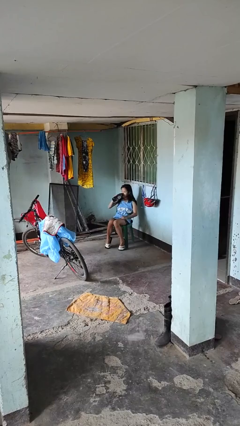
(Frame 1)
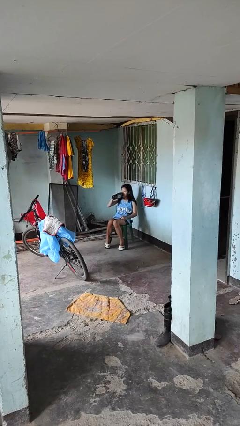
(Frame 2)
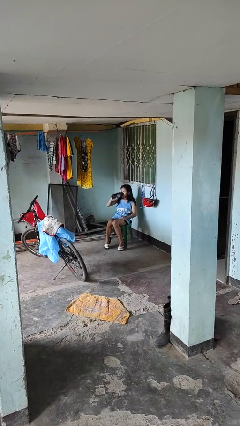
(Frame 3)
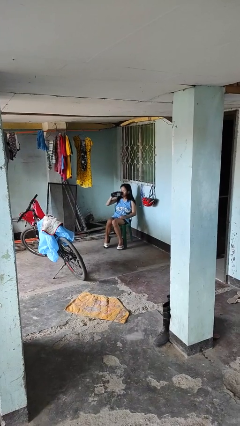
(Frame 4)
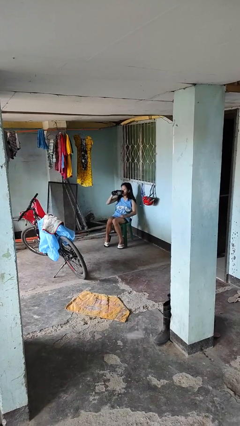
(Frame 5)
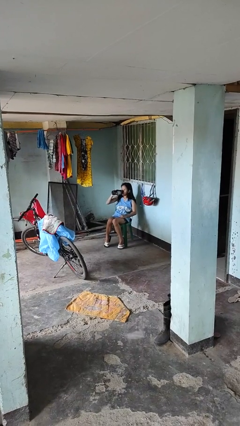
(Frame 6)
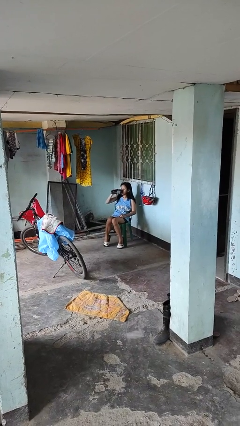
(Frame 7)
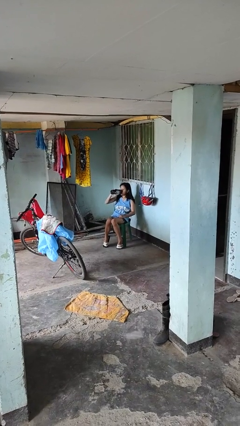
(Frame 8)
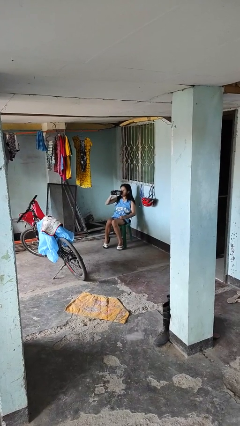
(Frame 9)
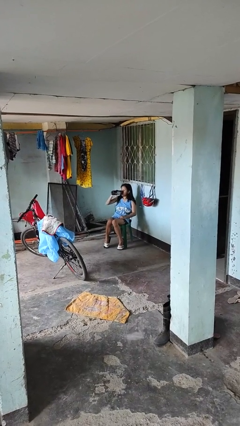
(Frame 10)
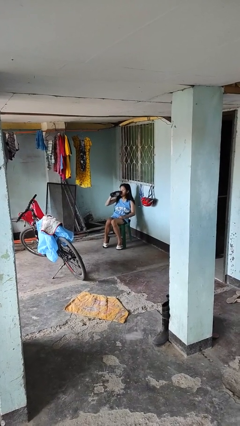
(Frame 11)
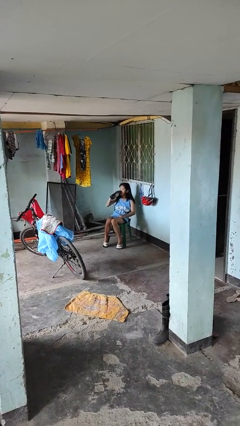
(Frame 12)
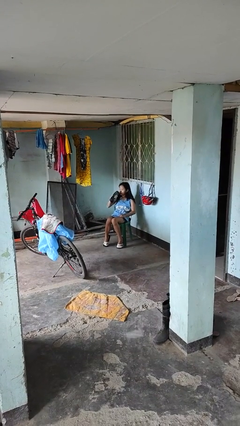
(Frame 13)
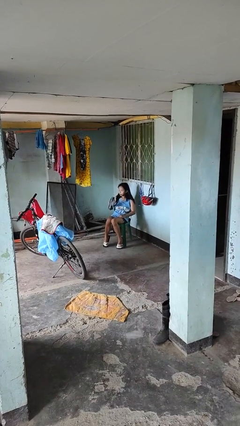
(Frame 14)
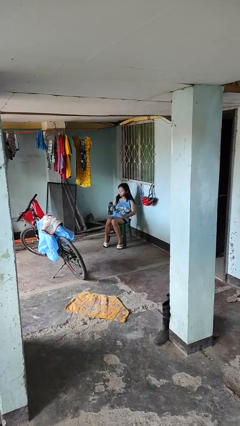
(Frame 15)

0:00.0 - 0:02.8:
person drinks from bottle

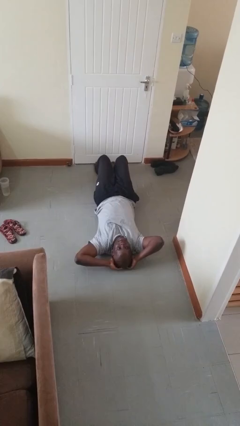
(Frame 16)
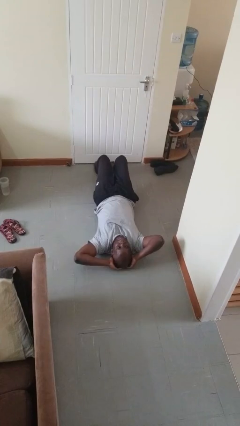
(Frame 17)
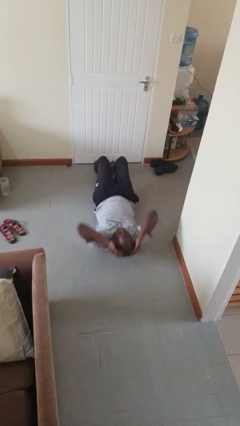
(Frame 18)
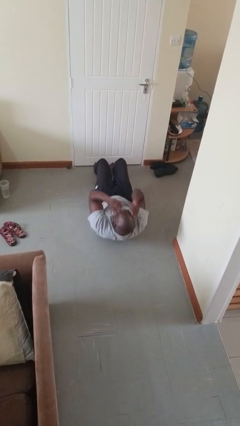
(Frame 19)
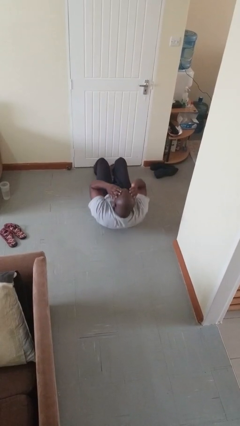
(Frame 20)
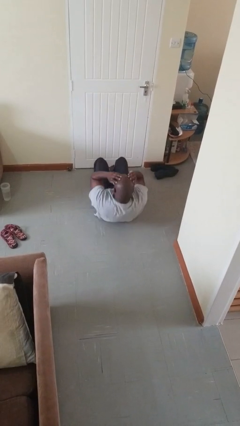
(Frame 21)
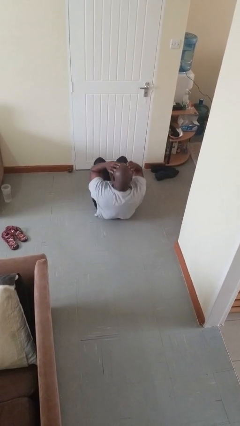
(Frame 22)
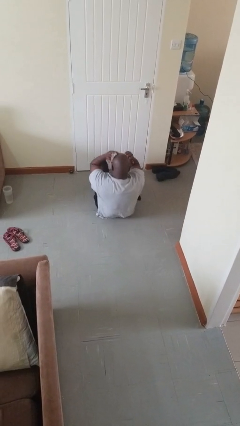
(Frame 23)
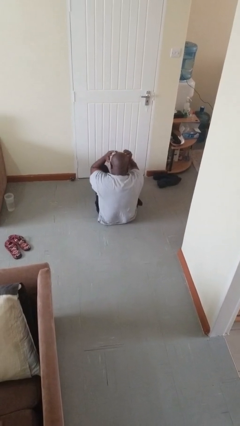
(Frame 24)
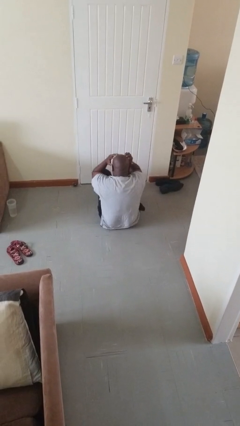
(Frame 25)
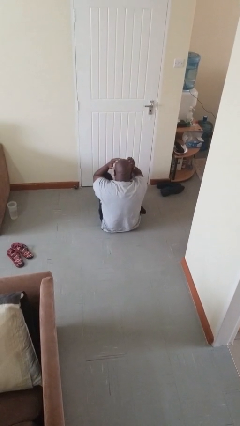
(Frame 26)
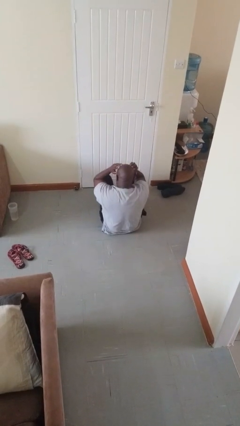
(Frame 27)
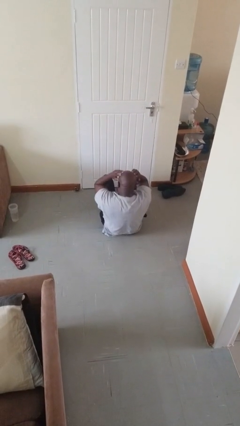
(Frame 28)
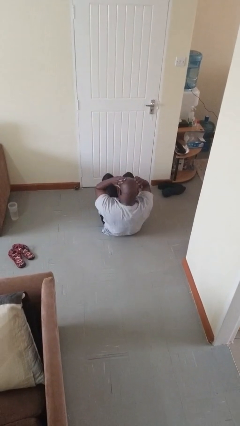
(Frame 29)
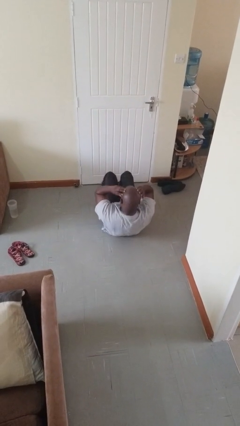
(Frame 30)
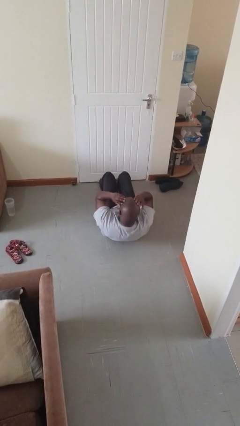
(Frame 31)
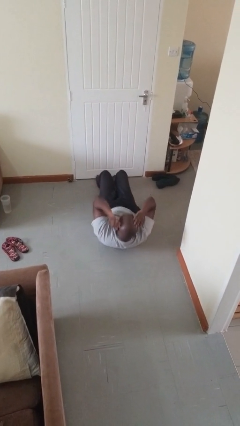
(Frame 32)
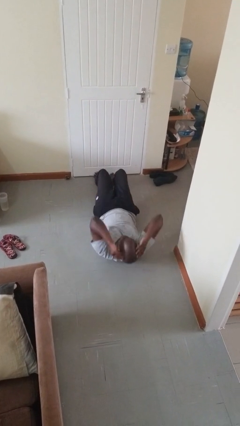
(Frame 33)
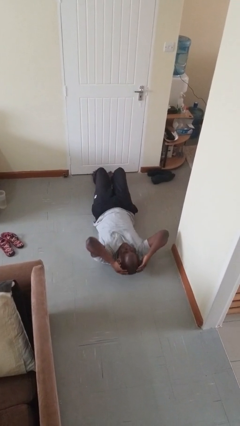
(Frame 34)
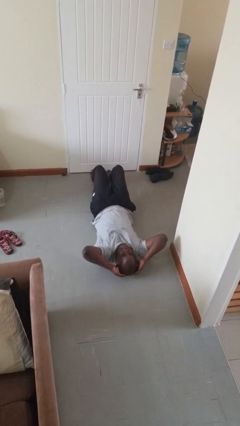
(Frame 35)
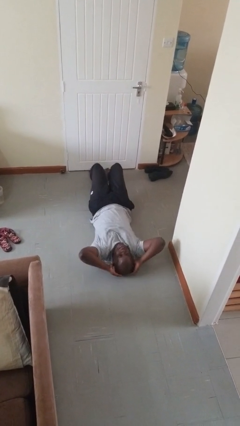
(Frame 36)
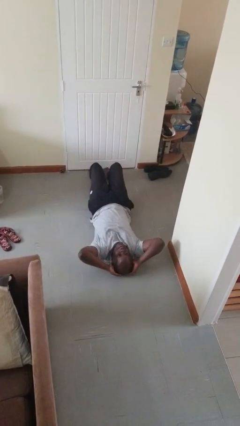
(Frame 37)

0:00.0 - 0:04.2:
person exercises with situp

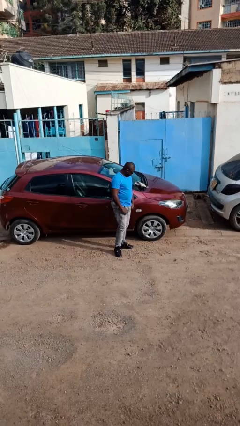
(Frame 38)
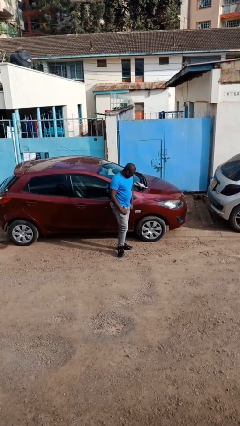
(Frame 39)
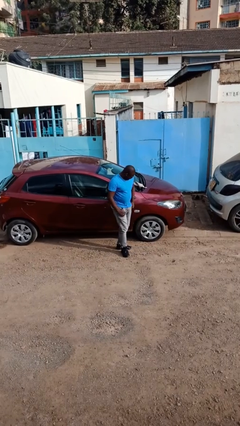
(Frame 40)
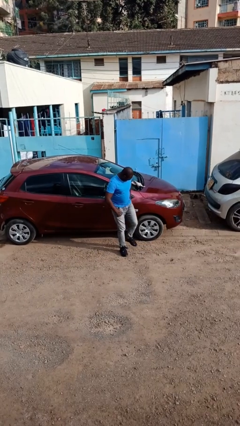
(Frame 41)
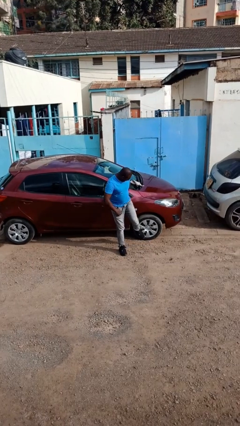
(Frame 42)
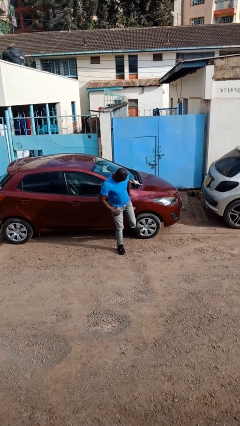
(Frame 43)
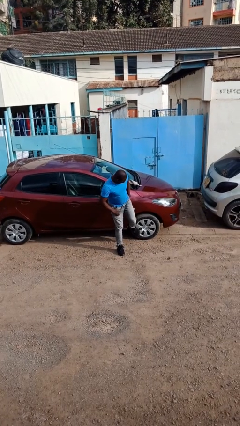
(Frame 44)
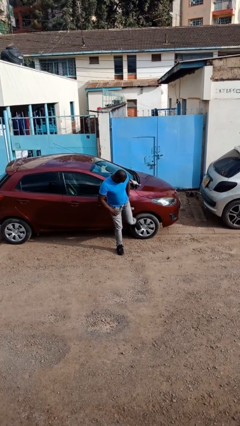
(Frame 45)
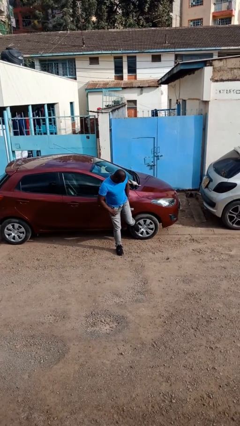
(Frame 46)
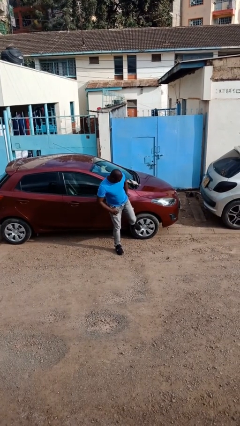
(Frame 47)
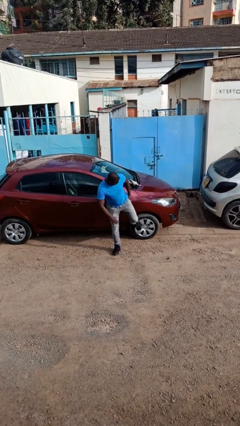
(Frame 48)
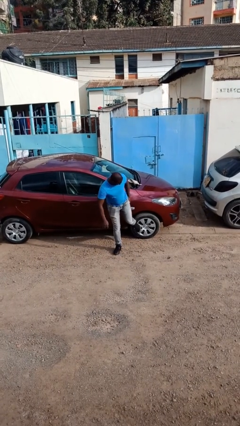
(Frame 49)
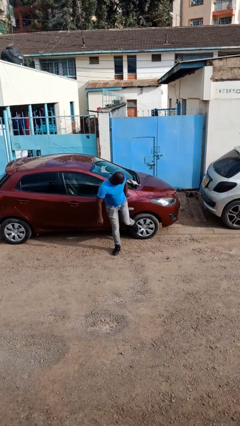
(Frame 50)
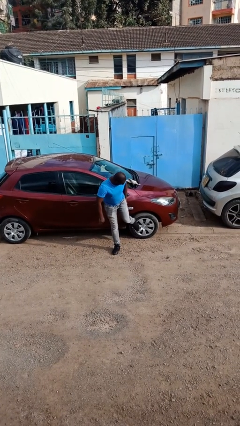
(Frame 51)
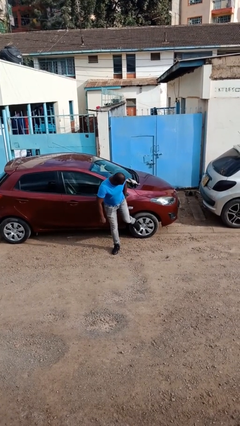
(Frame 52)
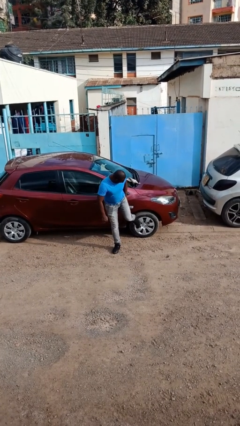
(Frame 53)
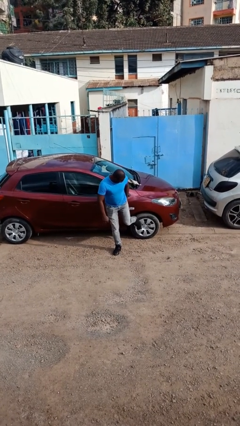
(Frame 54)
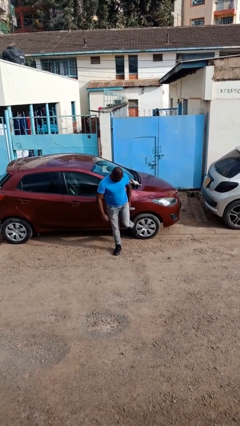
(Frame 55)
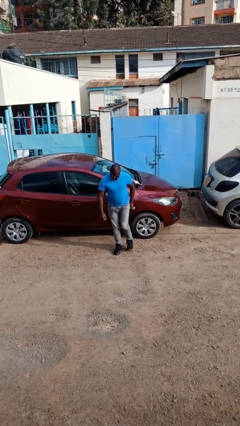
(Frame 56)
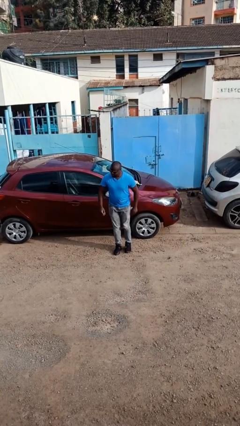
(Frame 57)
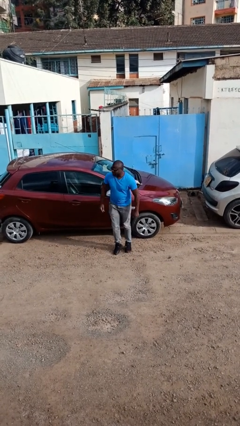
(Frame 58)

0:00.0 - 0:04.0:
person kicks car tires

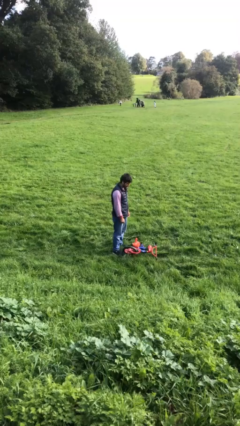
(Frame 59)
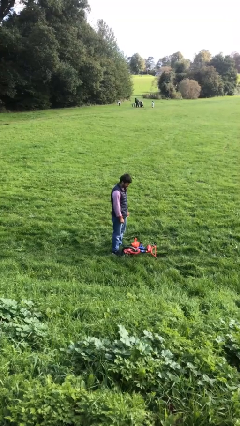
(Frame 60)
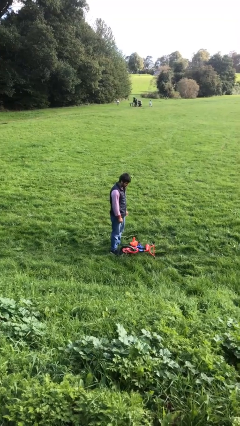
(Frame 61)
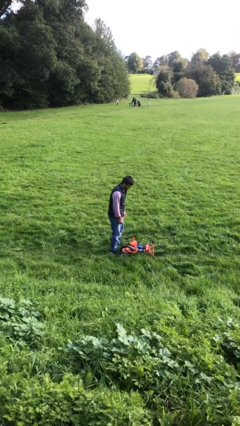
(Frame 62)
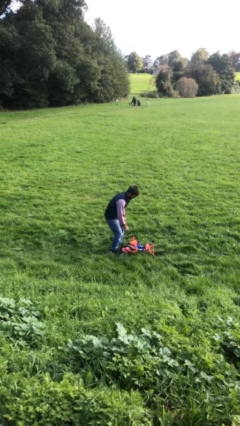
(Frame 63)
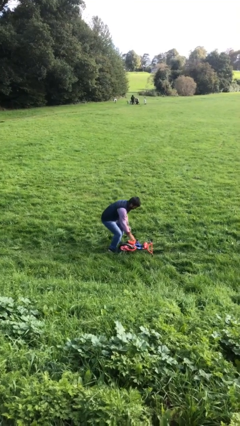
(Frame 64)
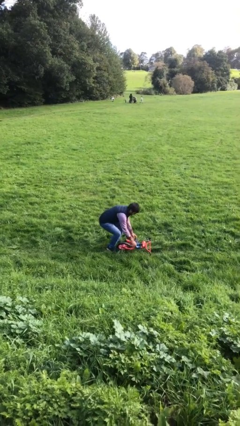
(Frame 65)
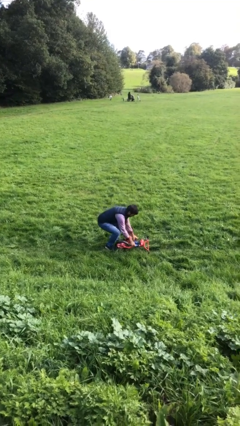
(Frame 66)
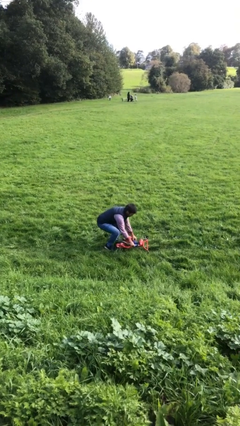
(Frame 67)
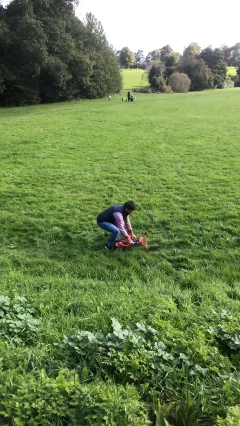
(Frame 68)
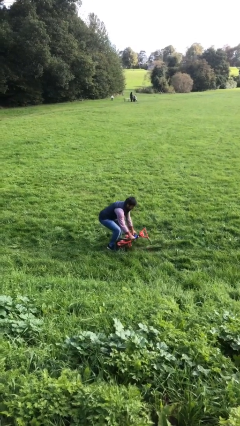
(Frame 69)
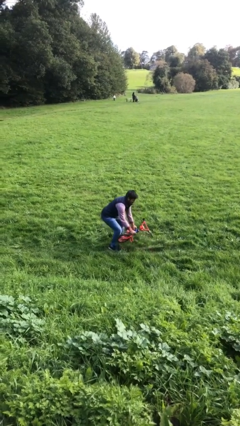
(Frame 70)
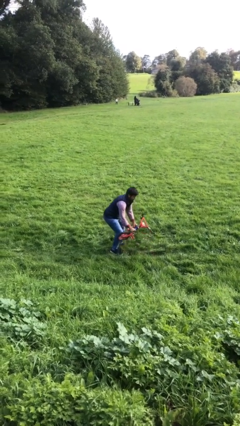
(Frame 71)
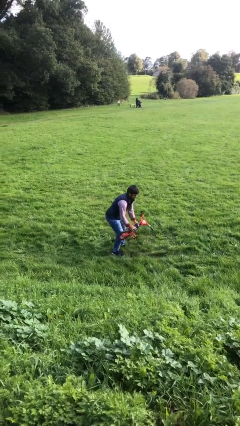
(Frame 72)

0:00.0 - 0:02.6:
person picks up object from floor

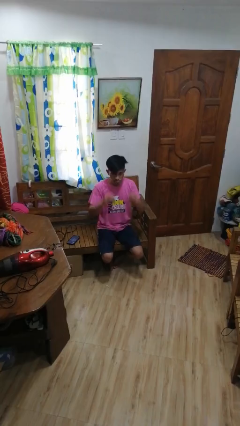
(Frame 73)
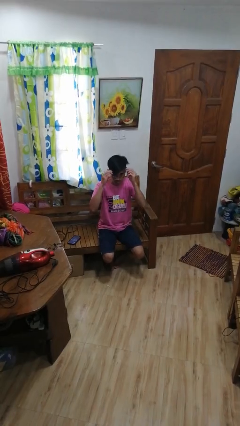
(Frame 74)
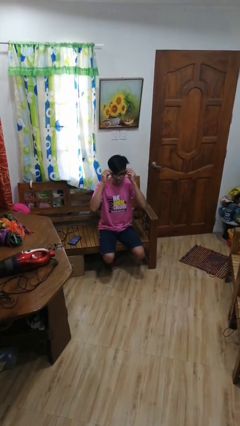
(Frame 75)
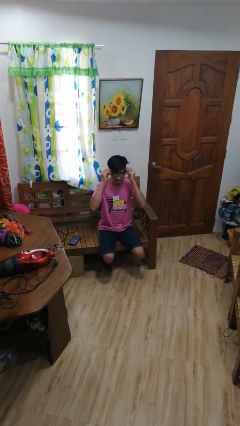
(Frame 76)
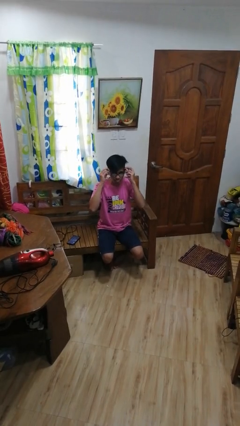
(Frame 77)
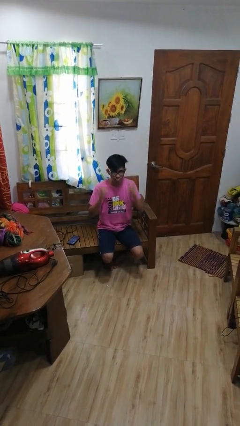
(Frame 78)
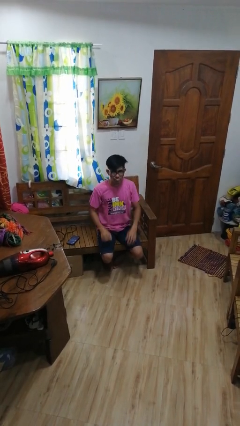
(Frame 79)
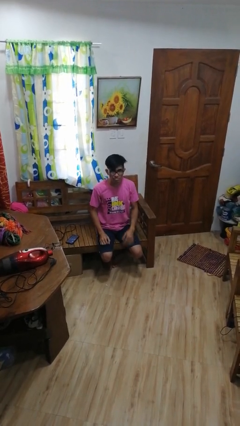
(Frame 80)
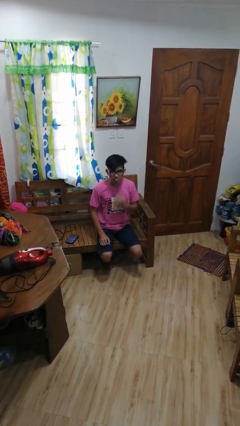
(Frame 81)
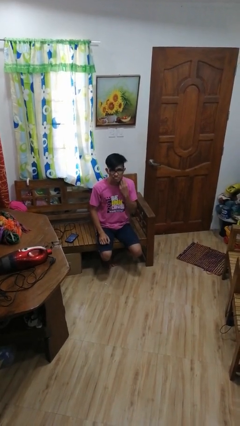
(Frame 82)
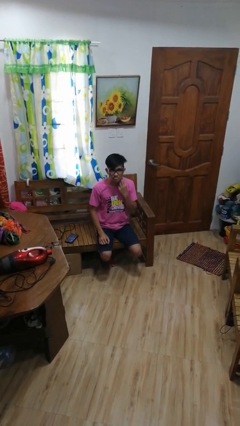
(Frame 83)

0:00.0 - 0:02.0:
person puts on glasses

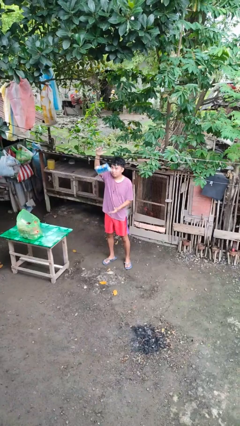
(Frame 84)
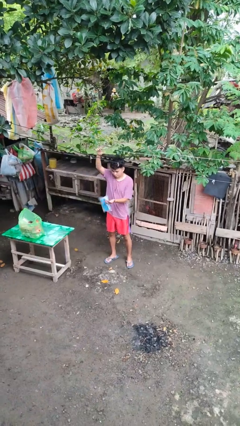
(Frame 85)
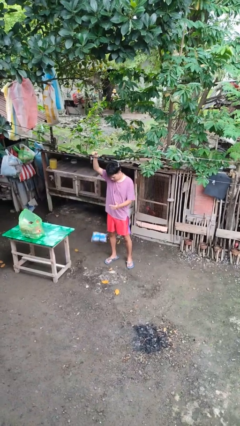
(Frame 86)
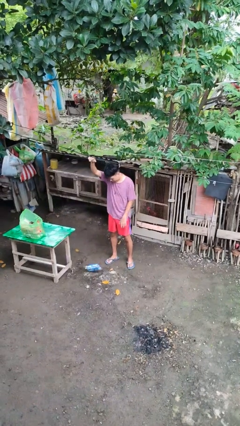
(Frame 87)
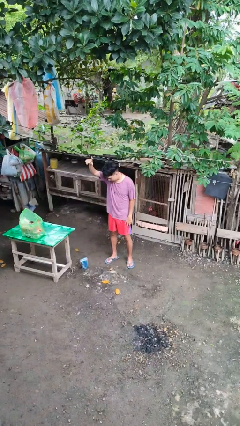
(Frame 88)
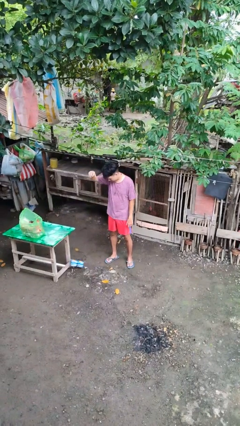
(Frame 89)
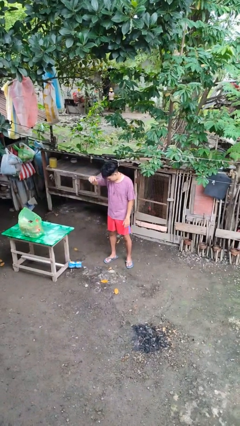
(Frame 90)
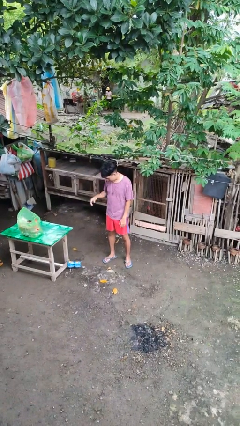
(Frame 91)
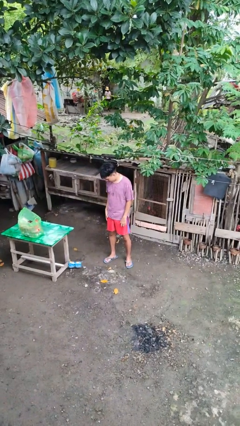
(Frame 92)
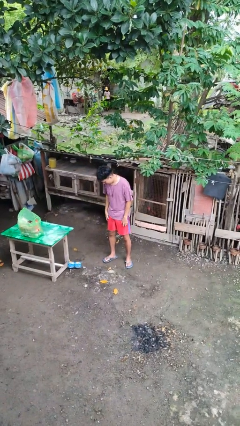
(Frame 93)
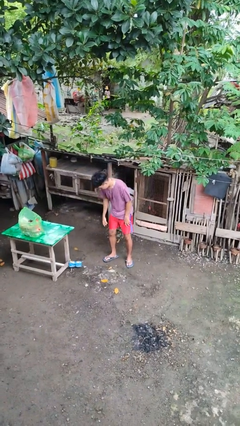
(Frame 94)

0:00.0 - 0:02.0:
person drops object
